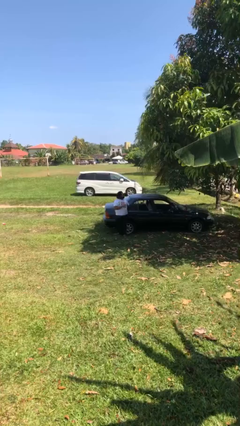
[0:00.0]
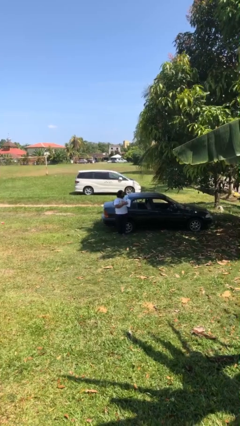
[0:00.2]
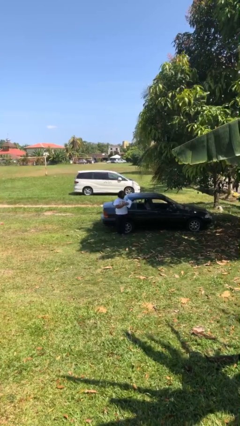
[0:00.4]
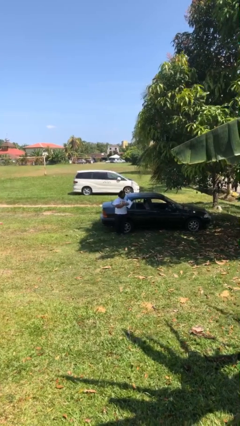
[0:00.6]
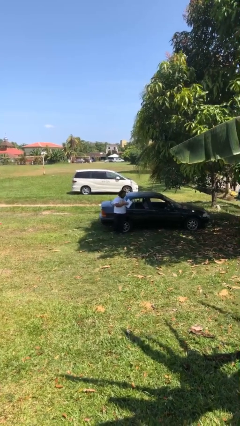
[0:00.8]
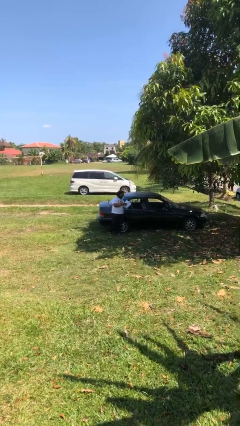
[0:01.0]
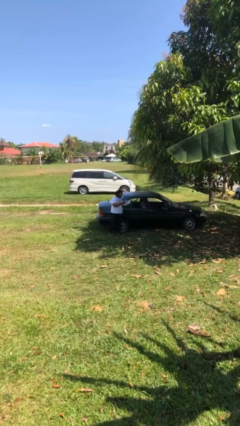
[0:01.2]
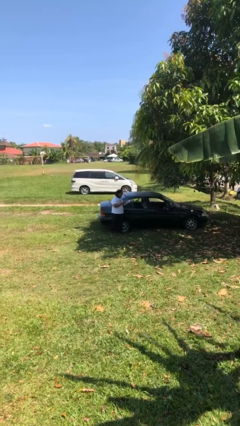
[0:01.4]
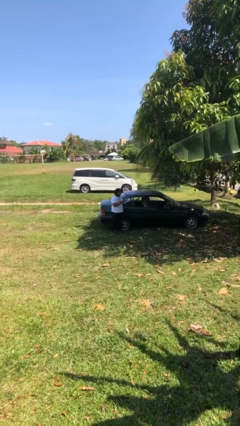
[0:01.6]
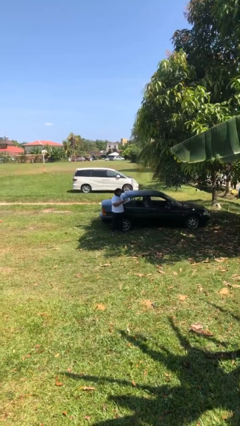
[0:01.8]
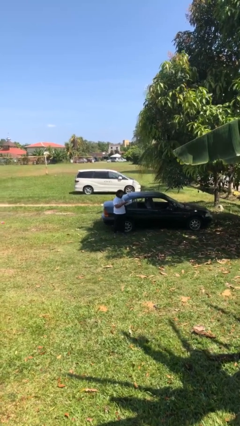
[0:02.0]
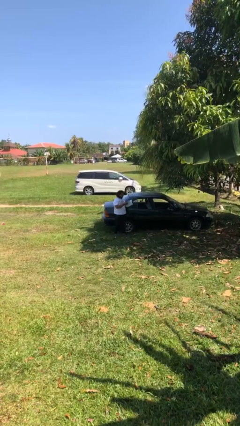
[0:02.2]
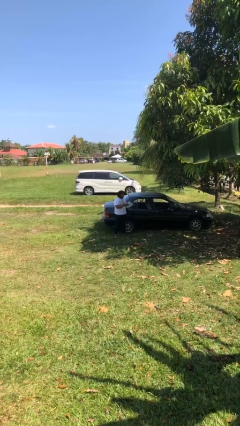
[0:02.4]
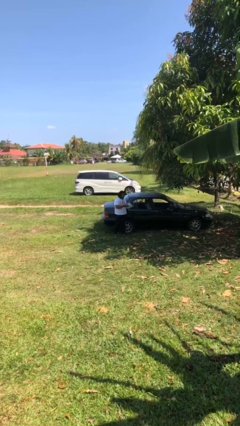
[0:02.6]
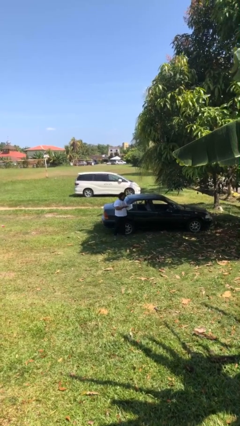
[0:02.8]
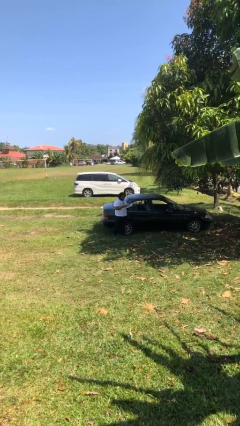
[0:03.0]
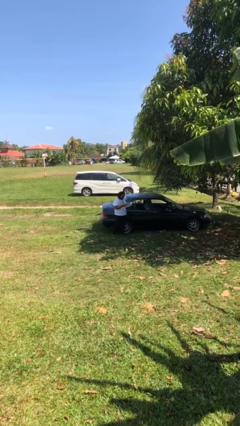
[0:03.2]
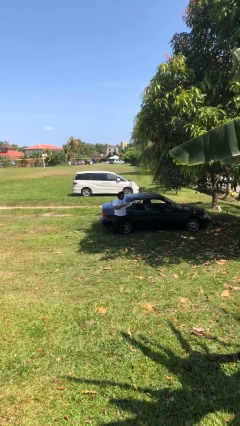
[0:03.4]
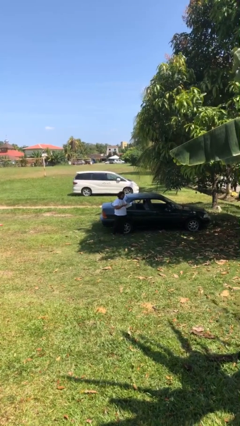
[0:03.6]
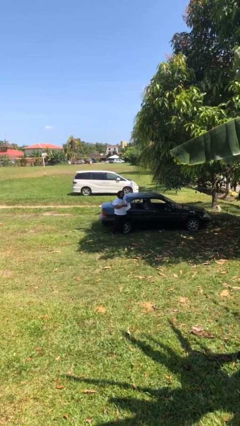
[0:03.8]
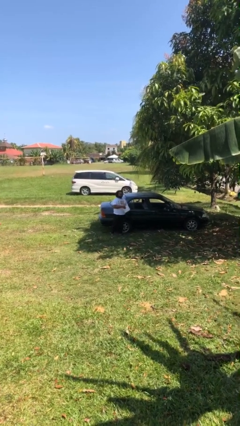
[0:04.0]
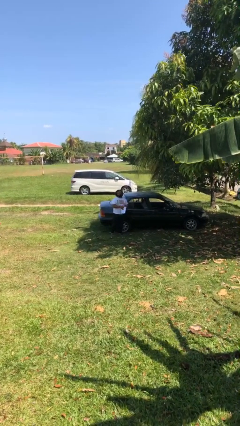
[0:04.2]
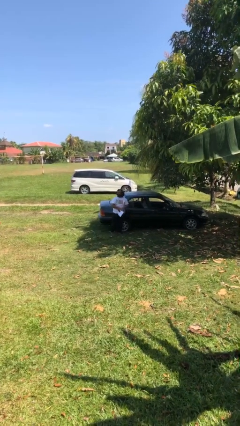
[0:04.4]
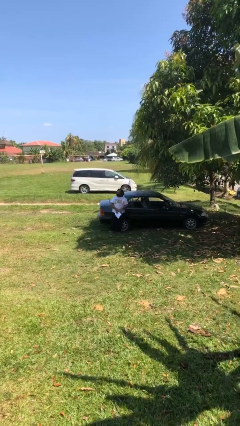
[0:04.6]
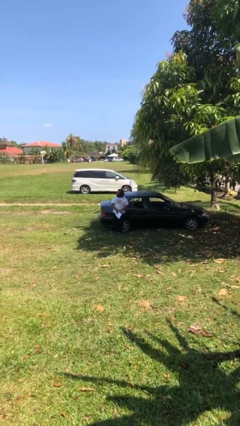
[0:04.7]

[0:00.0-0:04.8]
person reads document

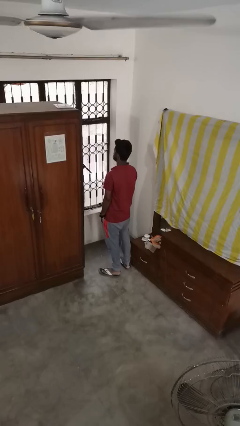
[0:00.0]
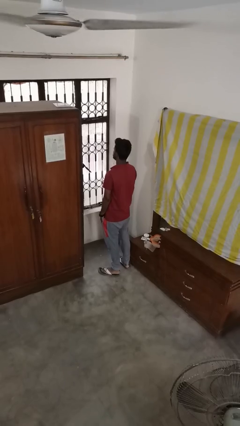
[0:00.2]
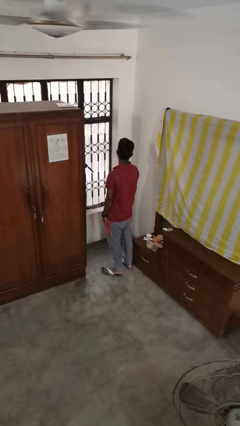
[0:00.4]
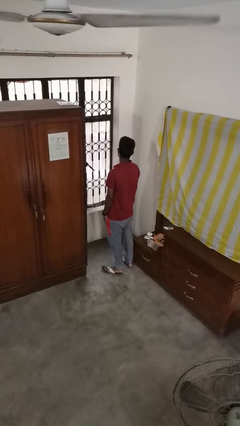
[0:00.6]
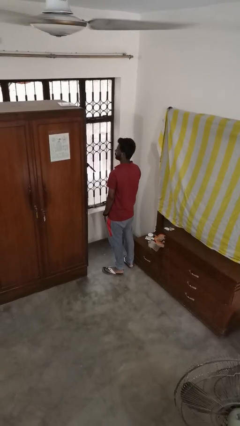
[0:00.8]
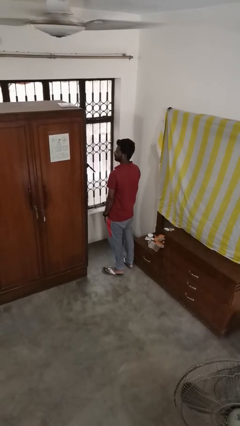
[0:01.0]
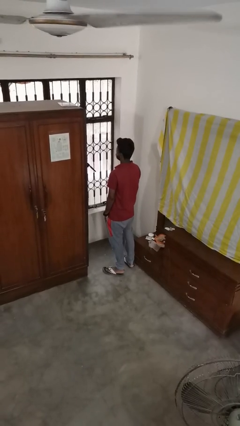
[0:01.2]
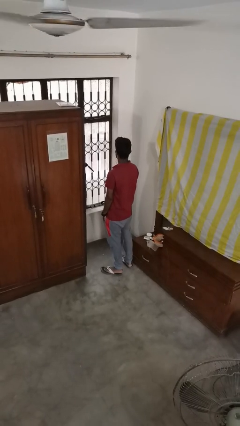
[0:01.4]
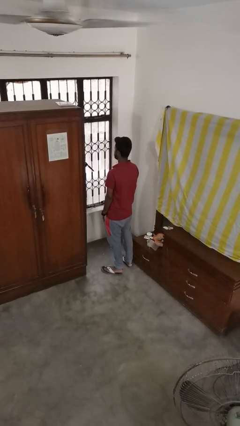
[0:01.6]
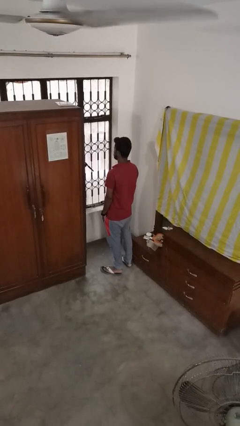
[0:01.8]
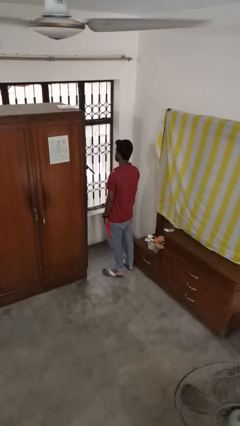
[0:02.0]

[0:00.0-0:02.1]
person shakes head

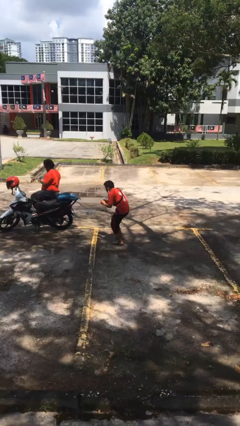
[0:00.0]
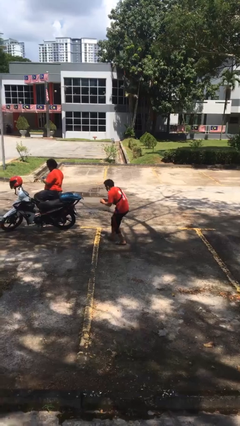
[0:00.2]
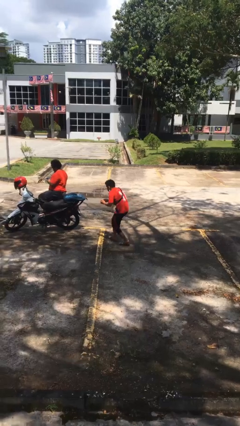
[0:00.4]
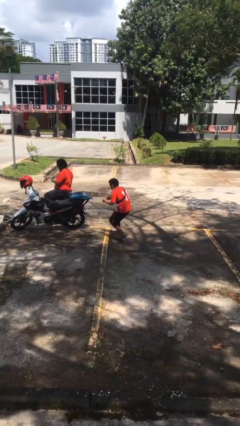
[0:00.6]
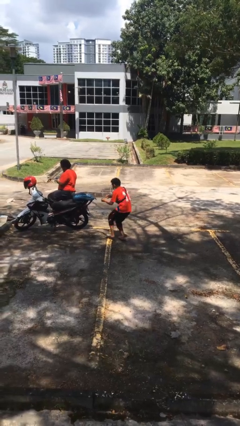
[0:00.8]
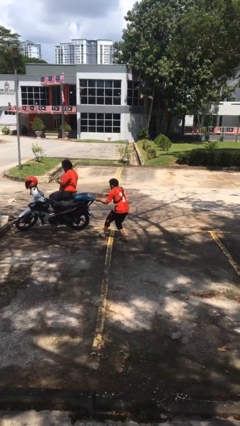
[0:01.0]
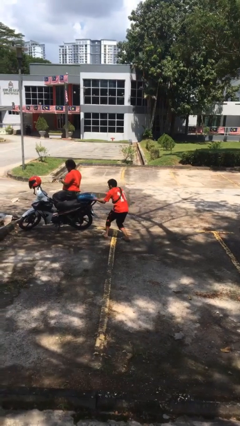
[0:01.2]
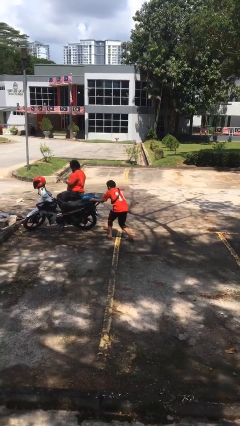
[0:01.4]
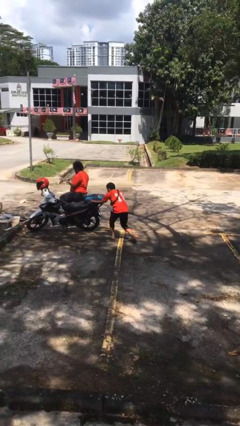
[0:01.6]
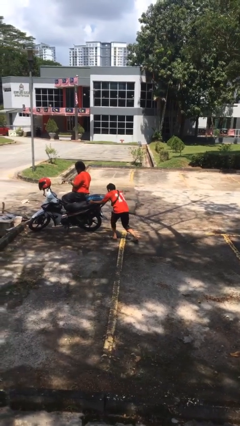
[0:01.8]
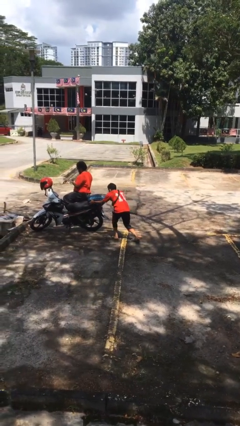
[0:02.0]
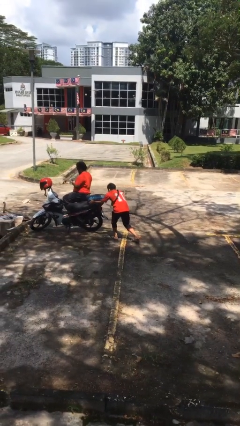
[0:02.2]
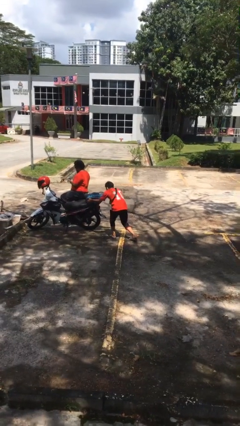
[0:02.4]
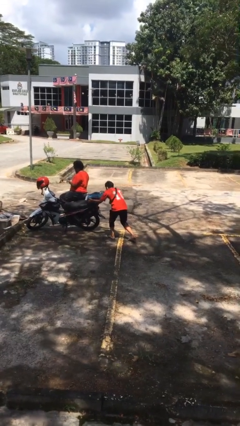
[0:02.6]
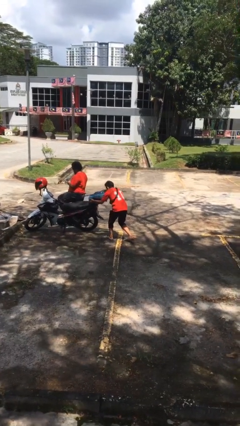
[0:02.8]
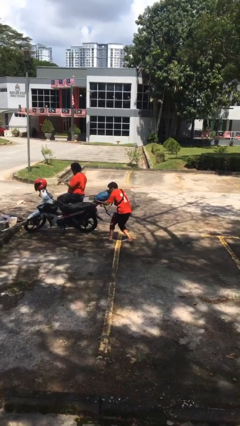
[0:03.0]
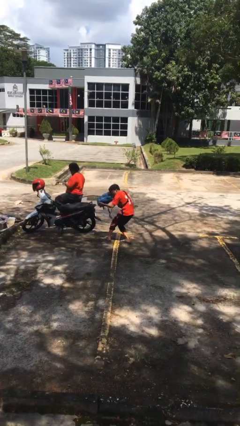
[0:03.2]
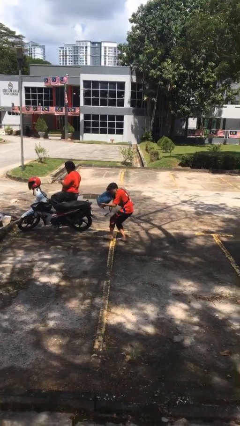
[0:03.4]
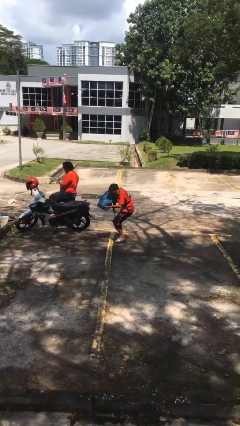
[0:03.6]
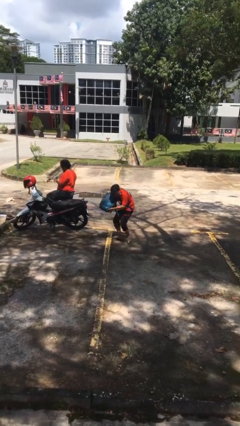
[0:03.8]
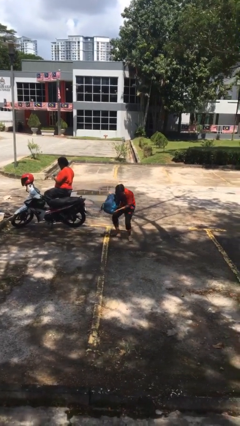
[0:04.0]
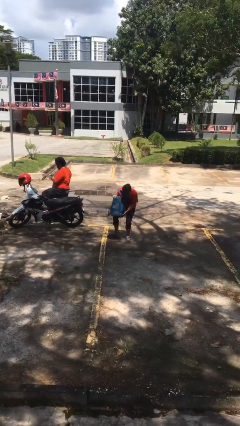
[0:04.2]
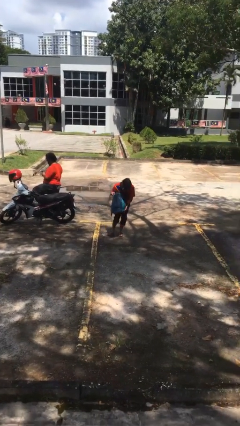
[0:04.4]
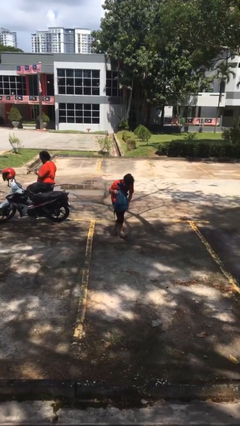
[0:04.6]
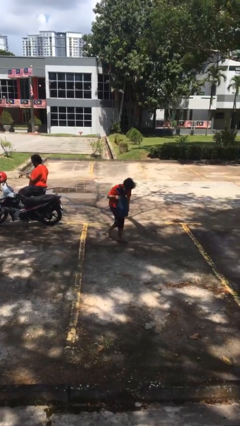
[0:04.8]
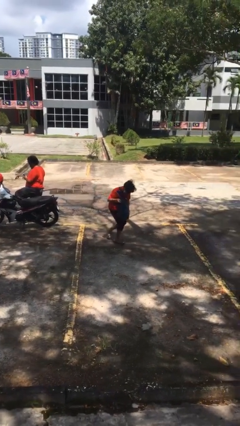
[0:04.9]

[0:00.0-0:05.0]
person steals object from person

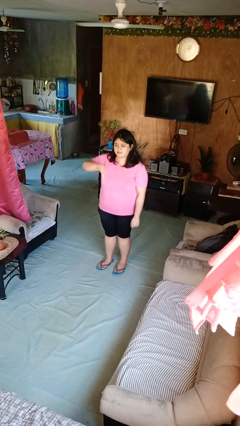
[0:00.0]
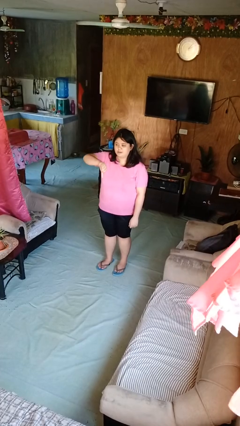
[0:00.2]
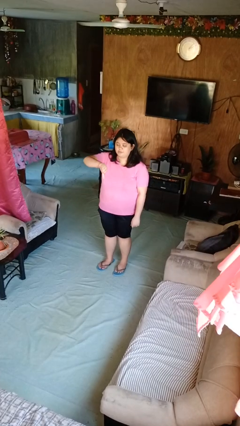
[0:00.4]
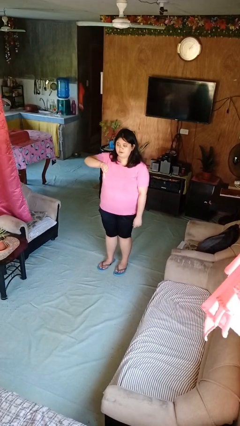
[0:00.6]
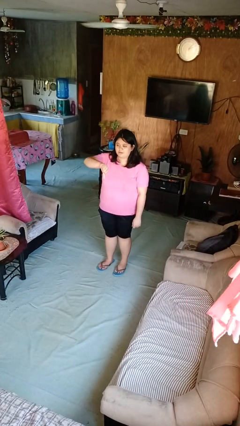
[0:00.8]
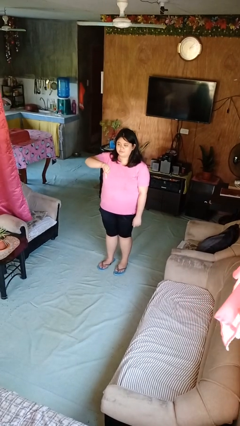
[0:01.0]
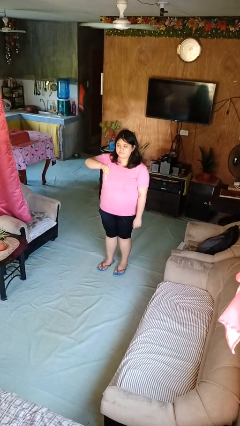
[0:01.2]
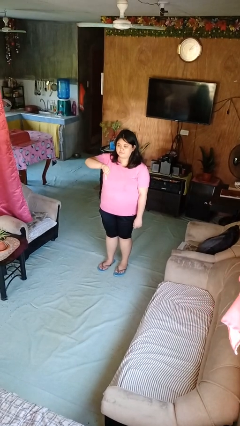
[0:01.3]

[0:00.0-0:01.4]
person gestures thumbs down

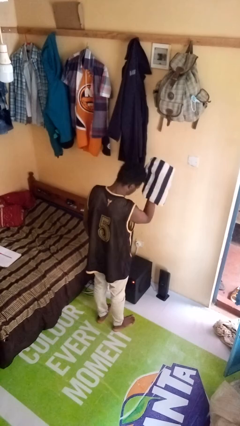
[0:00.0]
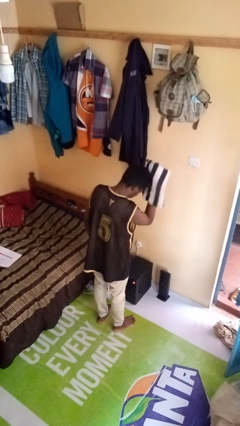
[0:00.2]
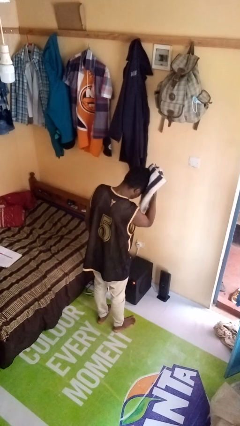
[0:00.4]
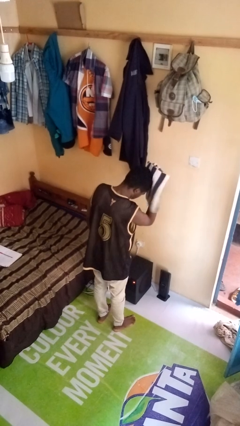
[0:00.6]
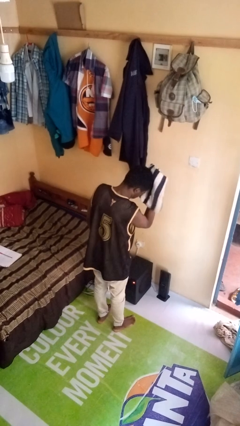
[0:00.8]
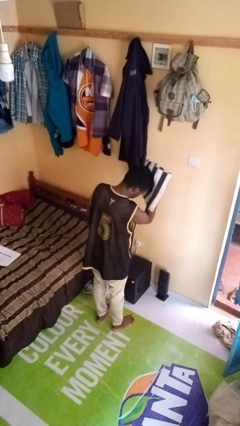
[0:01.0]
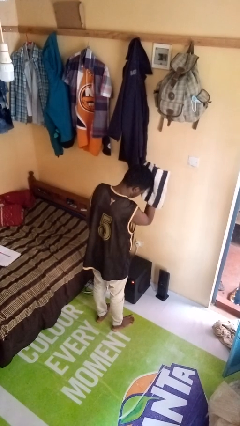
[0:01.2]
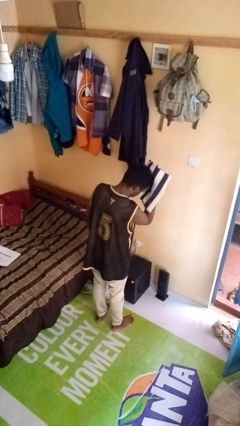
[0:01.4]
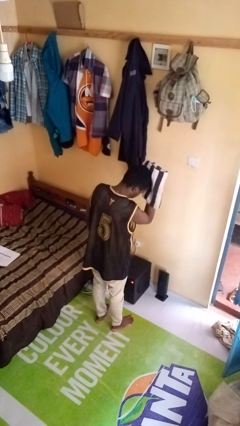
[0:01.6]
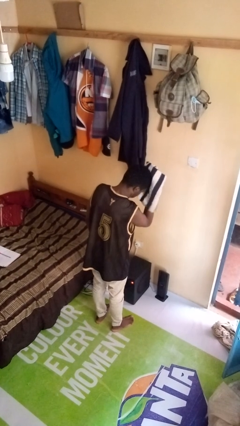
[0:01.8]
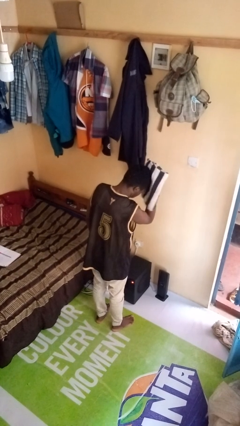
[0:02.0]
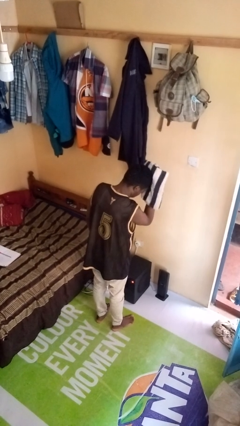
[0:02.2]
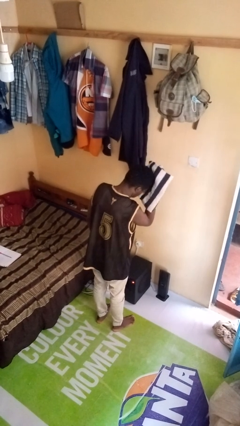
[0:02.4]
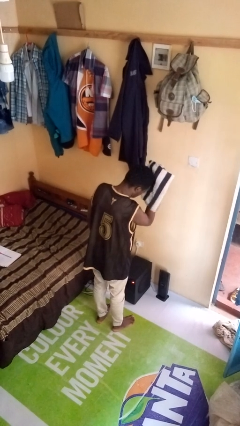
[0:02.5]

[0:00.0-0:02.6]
person dries hair with towel

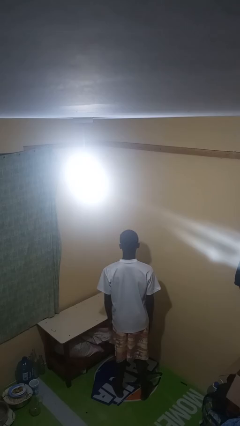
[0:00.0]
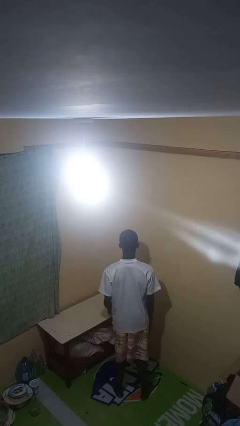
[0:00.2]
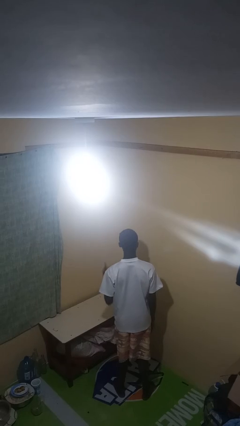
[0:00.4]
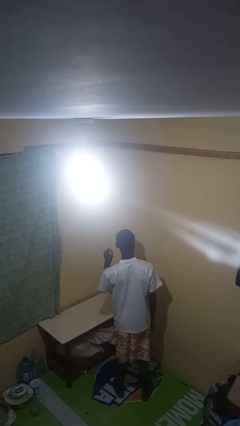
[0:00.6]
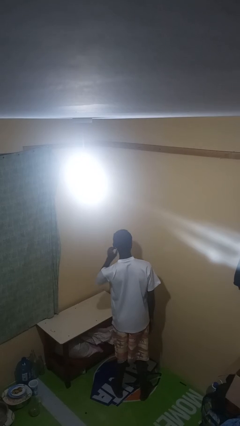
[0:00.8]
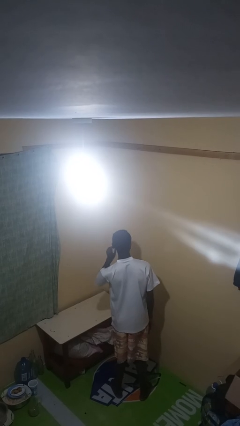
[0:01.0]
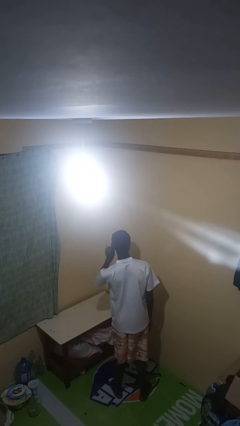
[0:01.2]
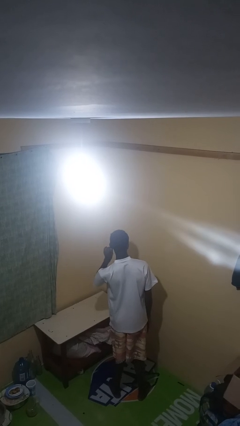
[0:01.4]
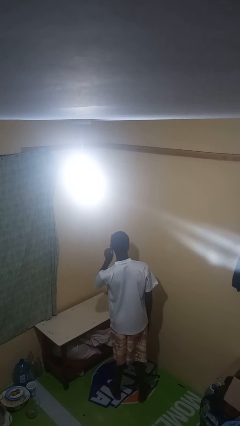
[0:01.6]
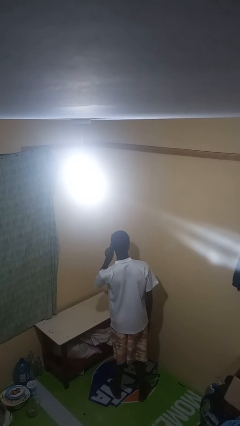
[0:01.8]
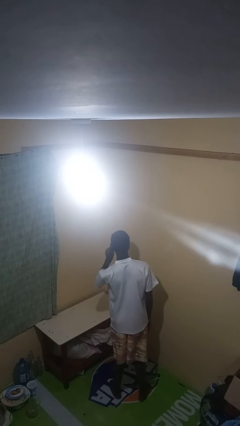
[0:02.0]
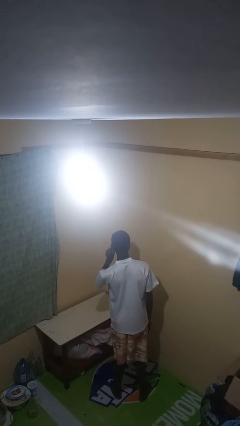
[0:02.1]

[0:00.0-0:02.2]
person gestures listen closely
